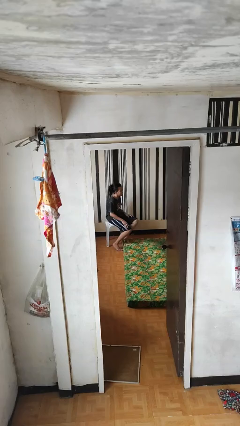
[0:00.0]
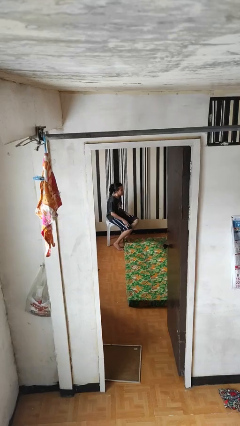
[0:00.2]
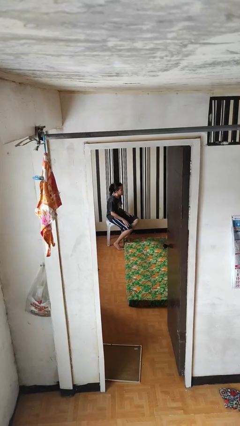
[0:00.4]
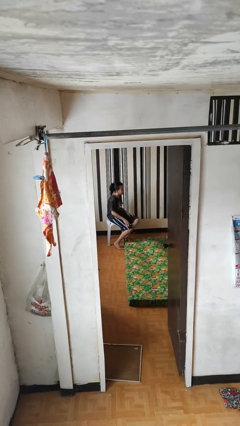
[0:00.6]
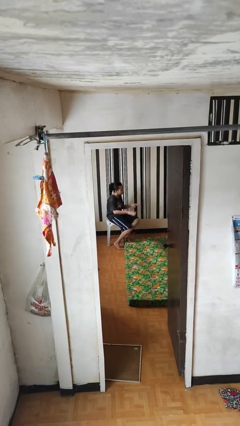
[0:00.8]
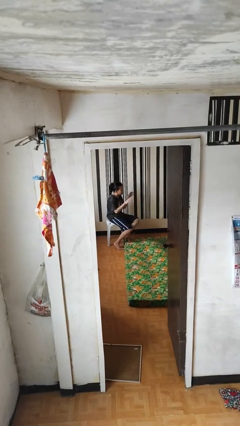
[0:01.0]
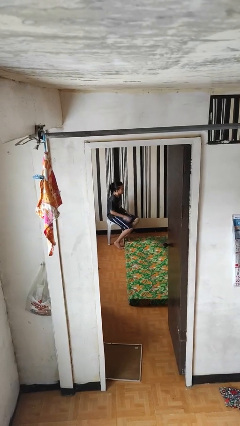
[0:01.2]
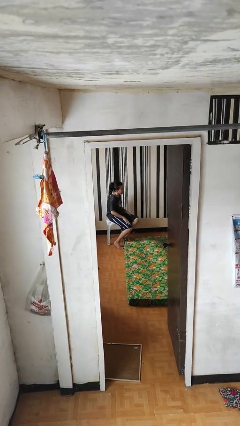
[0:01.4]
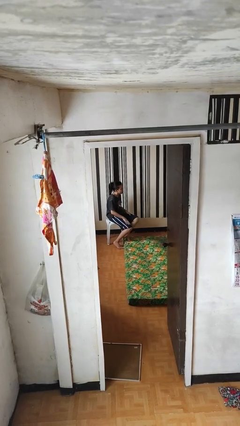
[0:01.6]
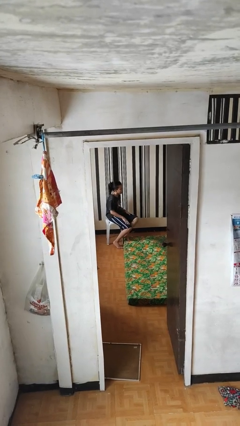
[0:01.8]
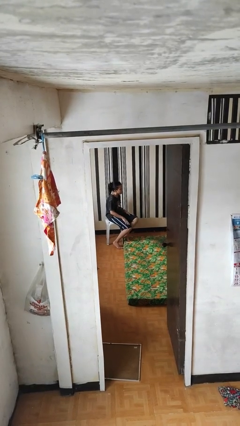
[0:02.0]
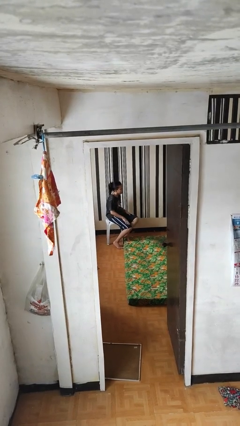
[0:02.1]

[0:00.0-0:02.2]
person slaps hands on thighs

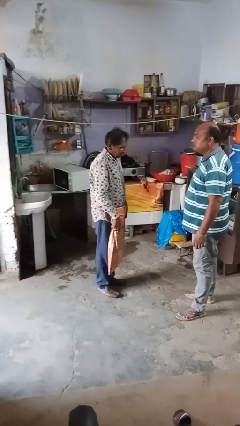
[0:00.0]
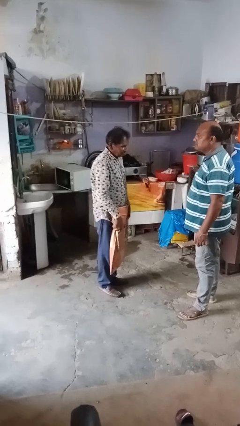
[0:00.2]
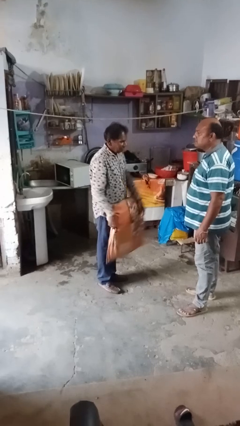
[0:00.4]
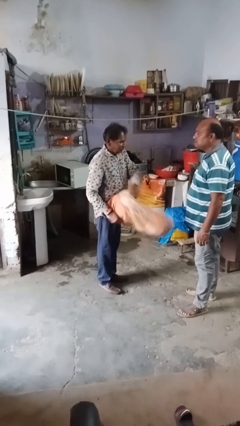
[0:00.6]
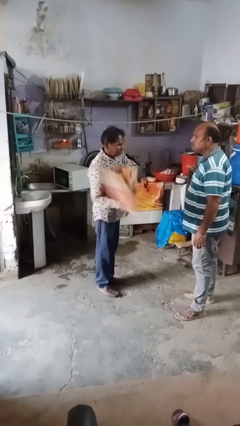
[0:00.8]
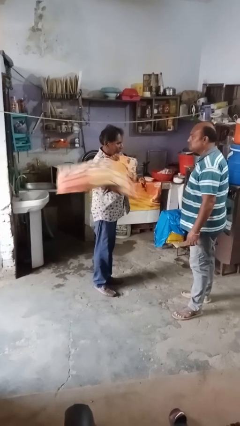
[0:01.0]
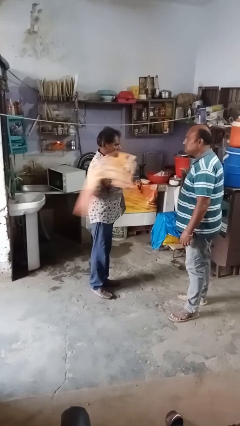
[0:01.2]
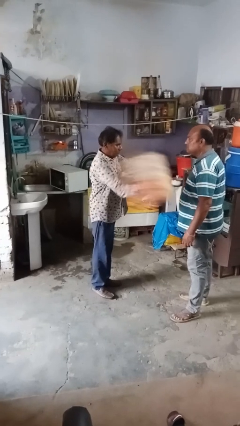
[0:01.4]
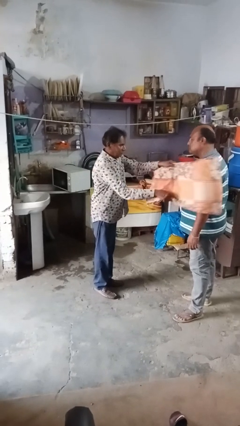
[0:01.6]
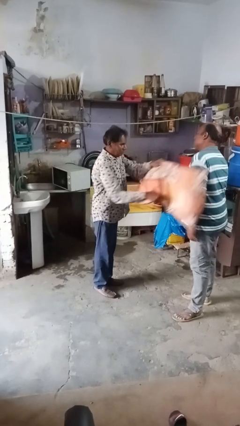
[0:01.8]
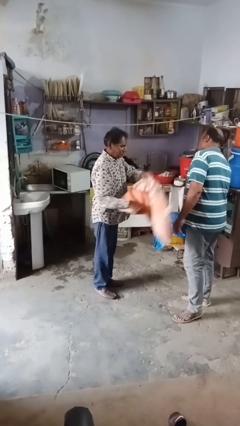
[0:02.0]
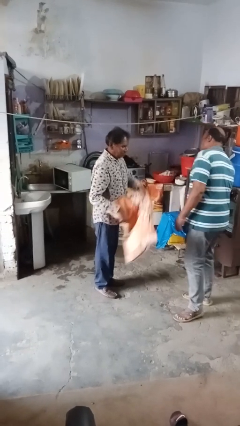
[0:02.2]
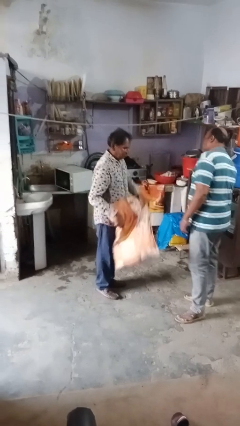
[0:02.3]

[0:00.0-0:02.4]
person hits person with pillow

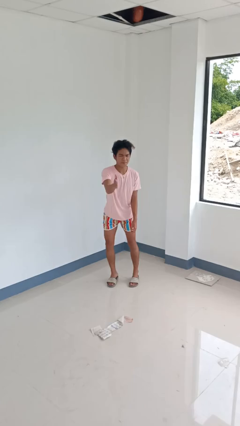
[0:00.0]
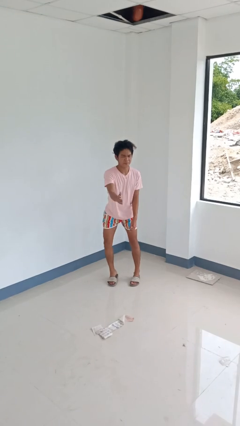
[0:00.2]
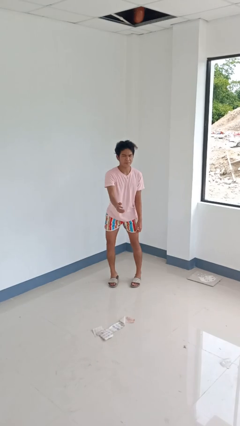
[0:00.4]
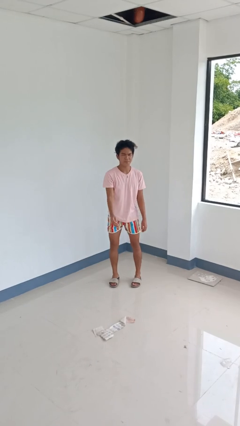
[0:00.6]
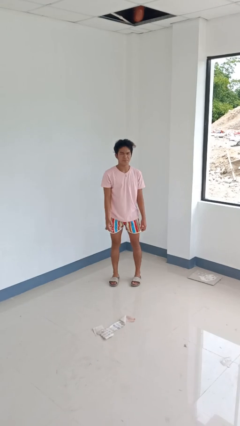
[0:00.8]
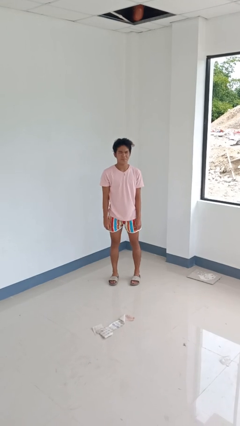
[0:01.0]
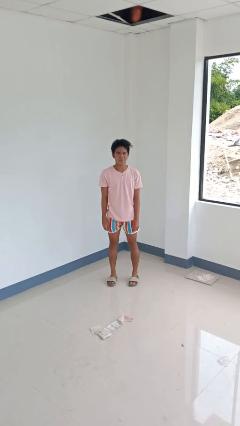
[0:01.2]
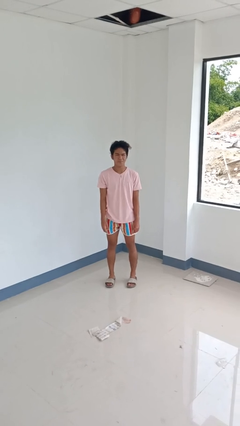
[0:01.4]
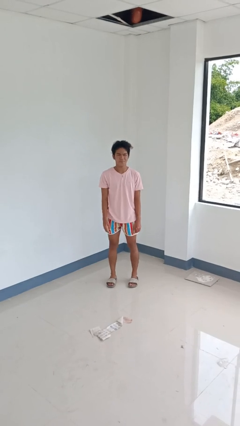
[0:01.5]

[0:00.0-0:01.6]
person karate chop

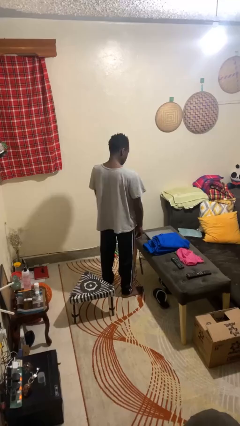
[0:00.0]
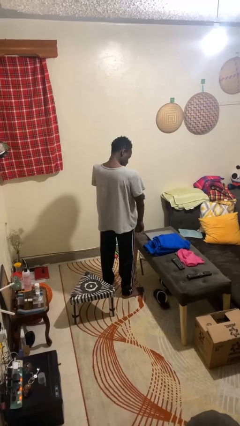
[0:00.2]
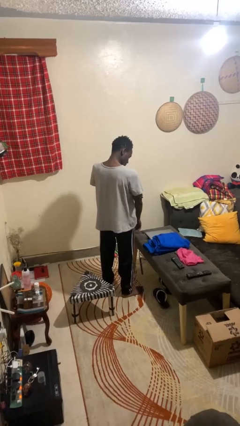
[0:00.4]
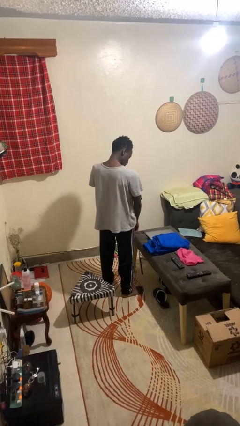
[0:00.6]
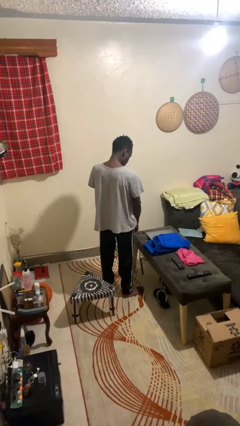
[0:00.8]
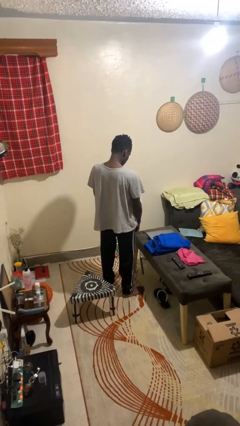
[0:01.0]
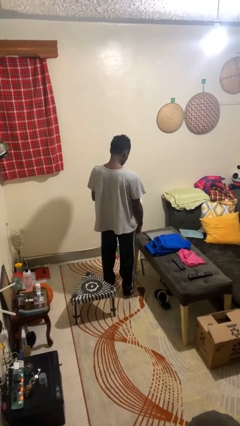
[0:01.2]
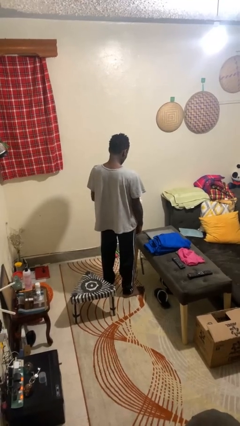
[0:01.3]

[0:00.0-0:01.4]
person swats bug

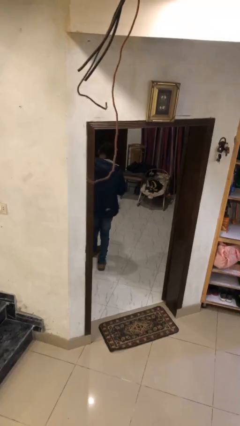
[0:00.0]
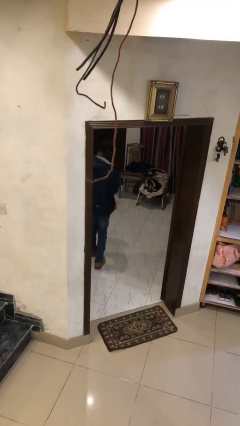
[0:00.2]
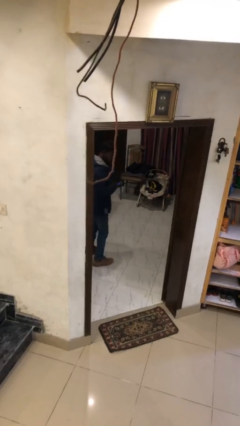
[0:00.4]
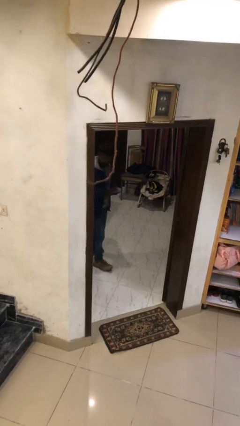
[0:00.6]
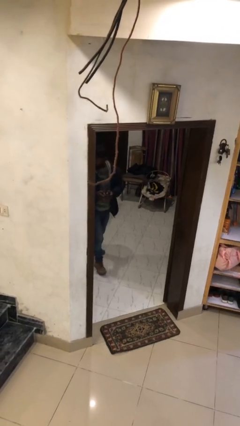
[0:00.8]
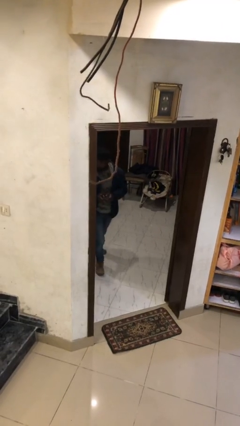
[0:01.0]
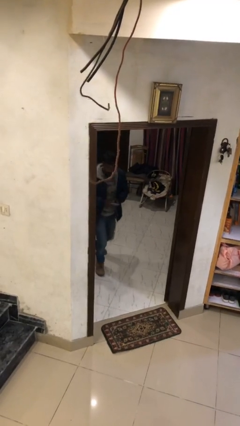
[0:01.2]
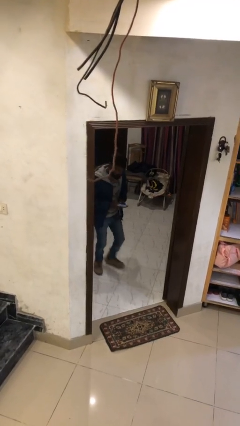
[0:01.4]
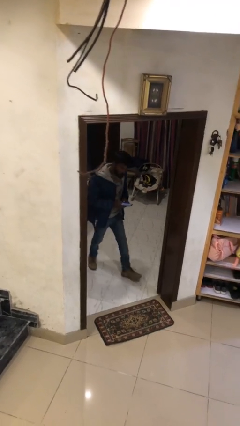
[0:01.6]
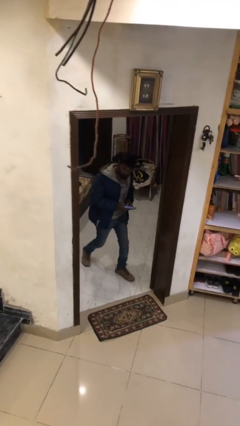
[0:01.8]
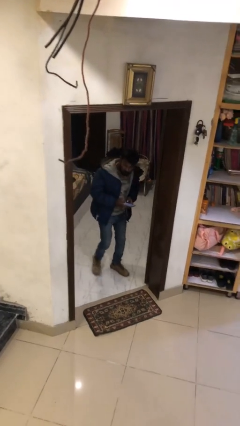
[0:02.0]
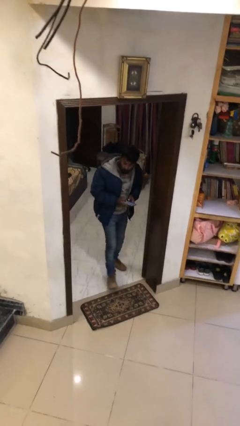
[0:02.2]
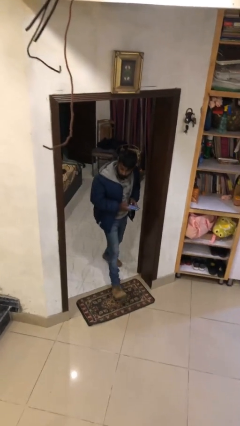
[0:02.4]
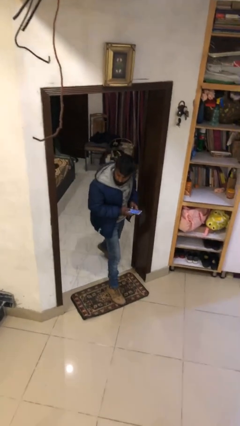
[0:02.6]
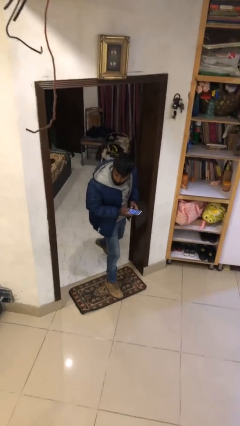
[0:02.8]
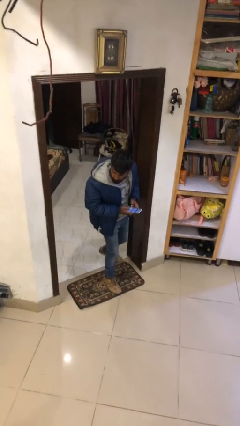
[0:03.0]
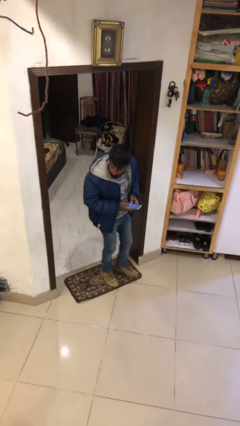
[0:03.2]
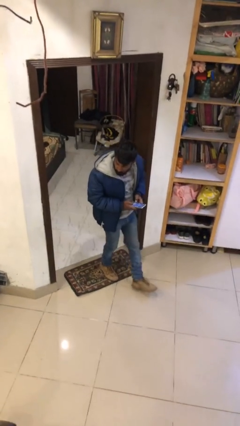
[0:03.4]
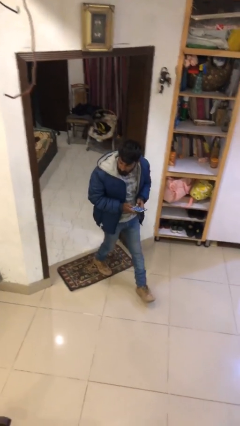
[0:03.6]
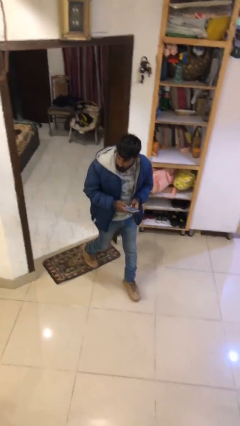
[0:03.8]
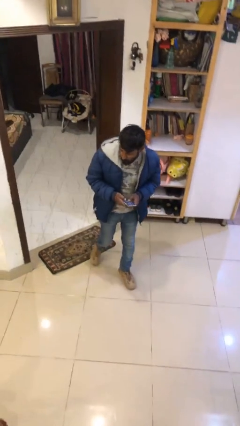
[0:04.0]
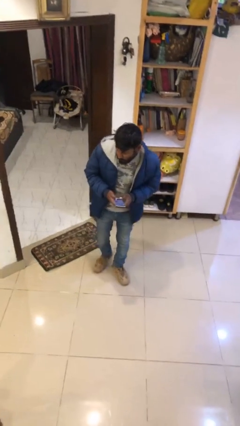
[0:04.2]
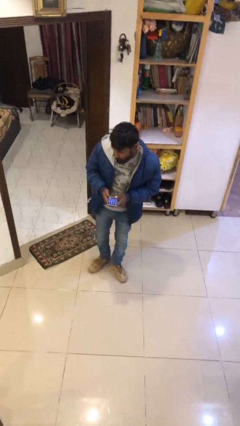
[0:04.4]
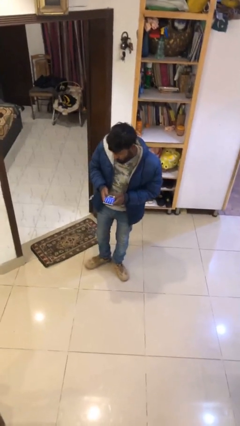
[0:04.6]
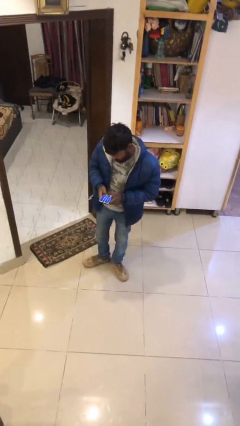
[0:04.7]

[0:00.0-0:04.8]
person enters scene through structure

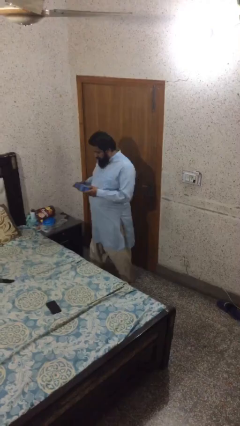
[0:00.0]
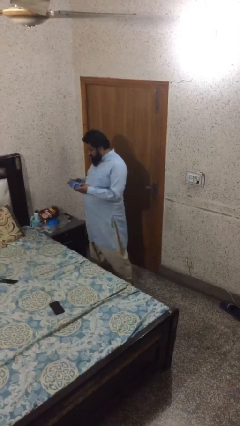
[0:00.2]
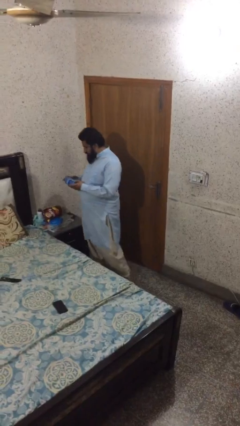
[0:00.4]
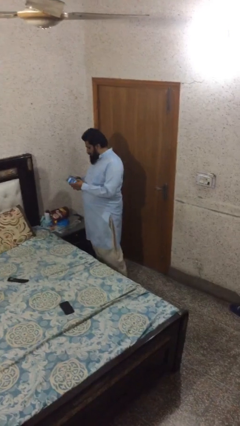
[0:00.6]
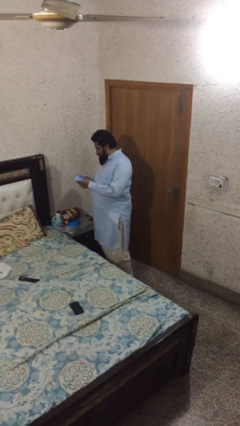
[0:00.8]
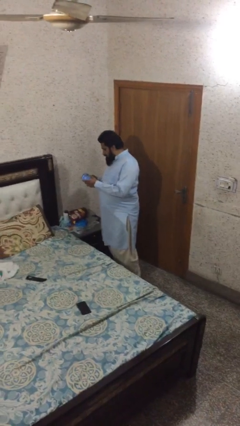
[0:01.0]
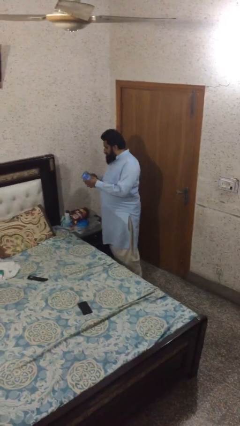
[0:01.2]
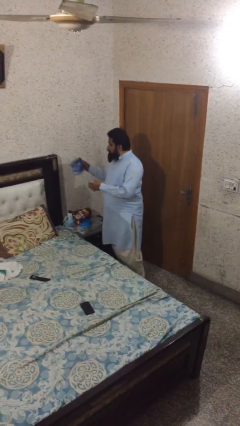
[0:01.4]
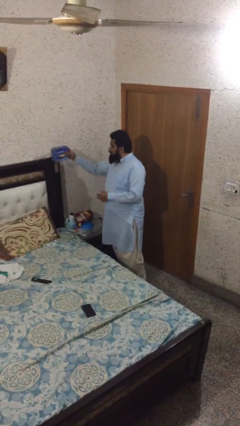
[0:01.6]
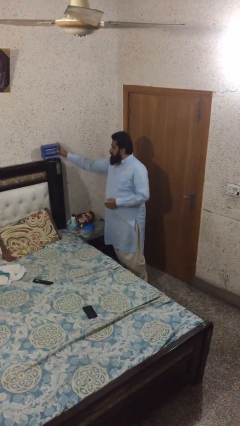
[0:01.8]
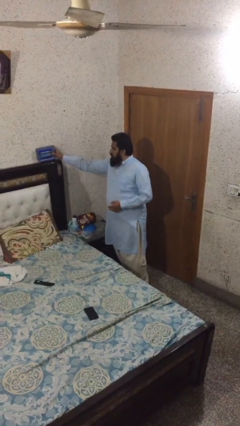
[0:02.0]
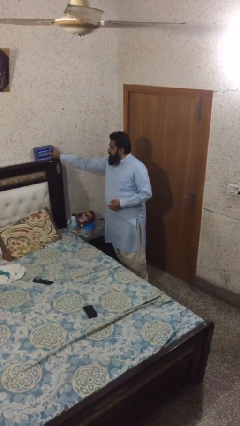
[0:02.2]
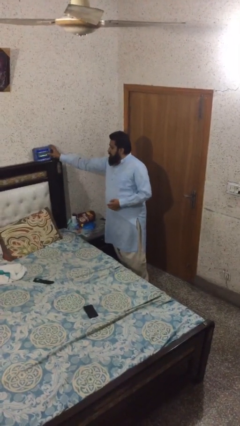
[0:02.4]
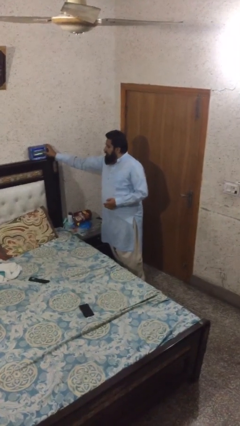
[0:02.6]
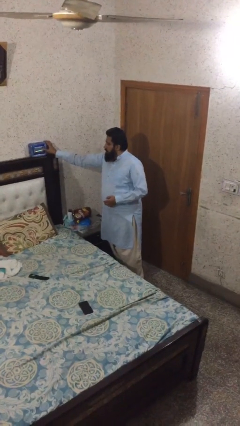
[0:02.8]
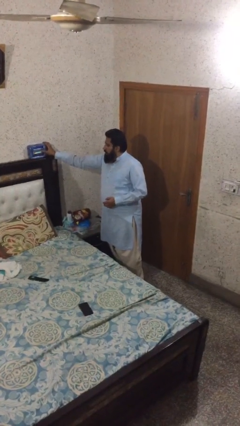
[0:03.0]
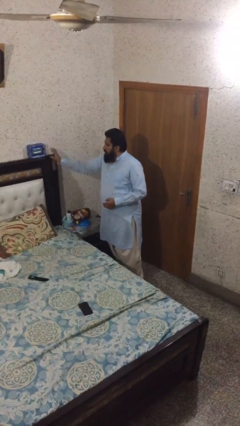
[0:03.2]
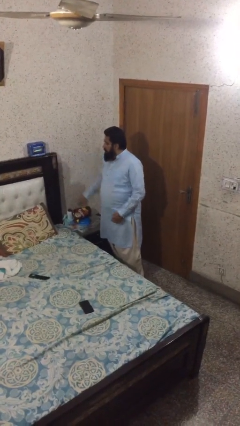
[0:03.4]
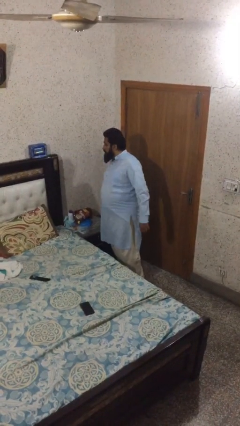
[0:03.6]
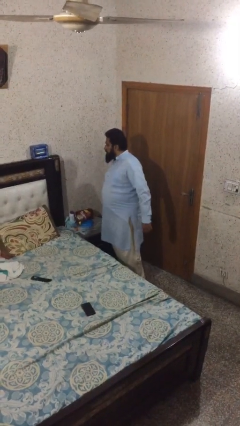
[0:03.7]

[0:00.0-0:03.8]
person puts down object on shelf

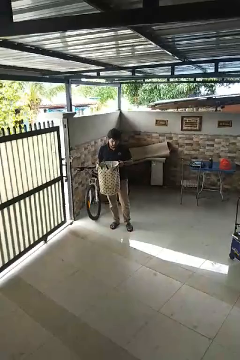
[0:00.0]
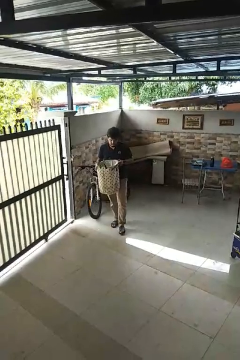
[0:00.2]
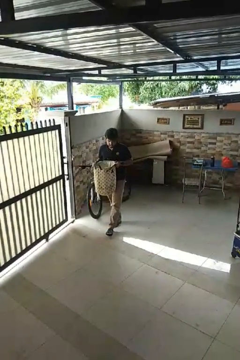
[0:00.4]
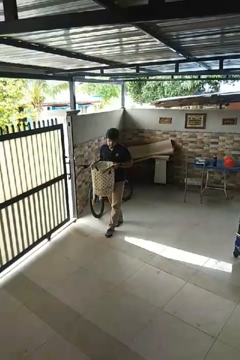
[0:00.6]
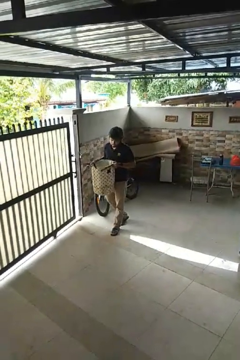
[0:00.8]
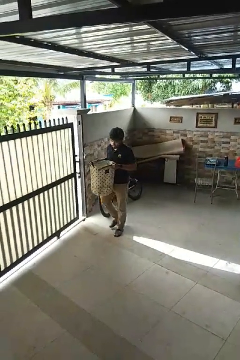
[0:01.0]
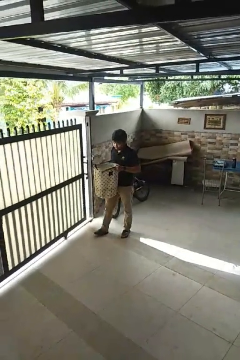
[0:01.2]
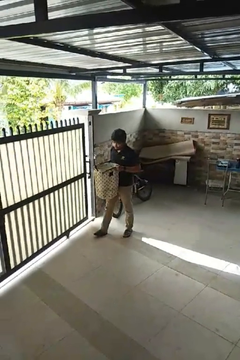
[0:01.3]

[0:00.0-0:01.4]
person carries laundry basket
